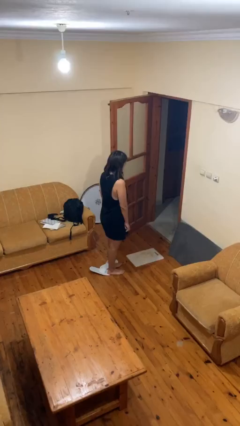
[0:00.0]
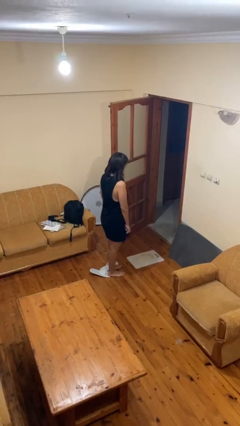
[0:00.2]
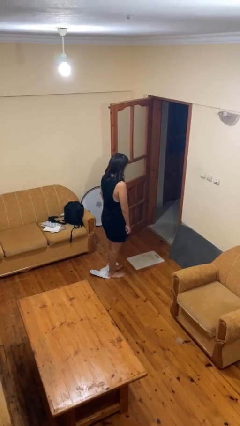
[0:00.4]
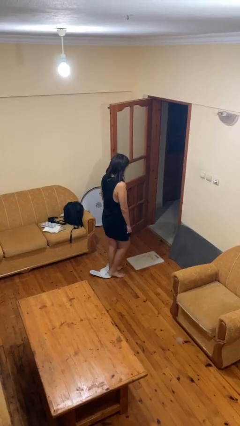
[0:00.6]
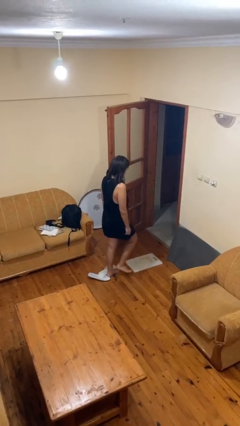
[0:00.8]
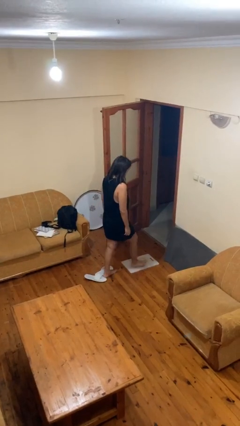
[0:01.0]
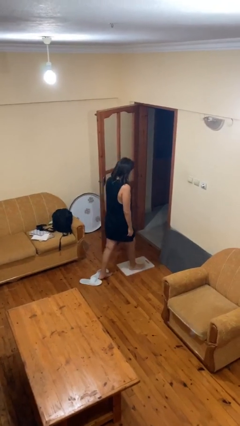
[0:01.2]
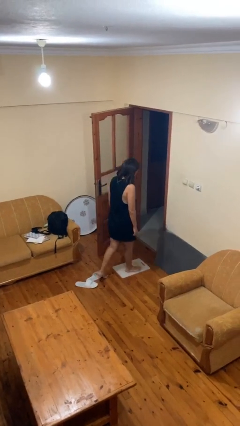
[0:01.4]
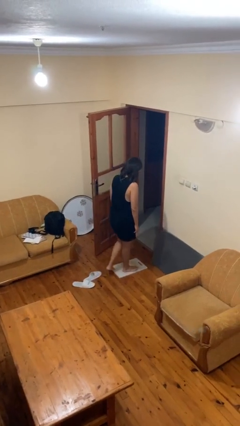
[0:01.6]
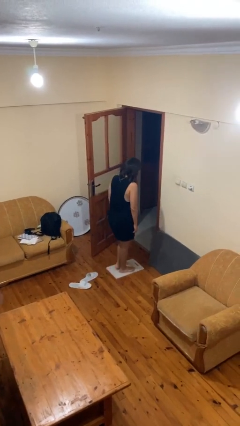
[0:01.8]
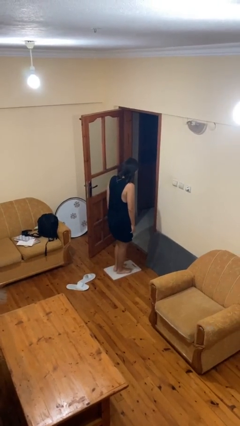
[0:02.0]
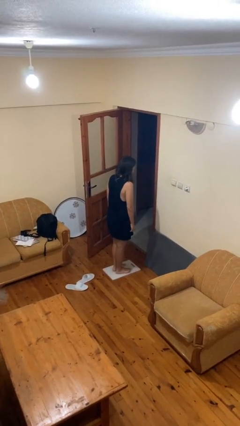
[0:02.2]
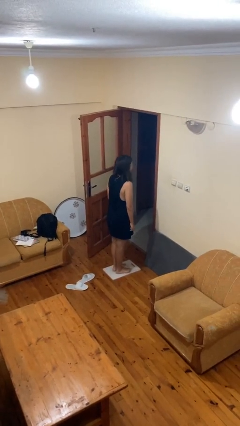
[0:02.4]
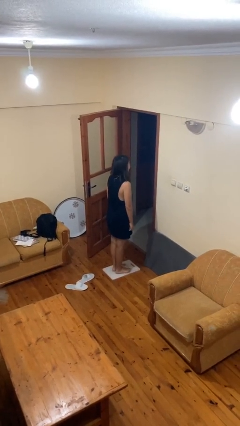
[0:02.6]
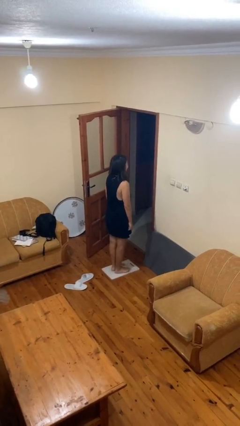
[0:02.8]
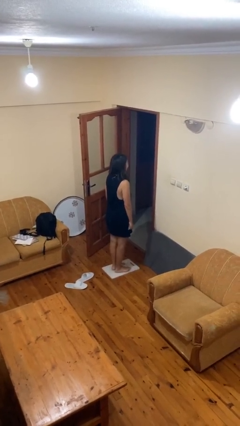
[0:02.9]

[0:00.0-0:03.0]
person uses bodyweight scale

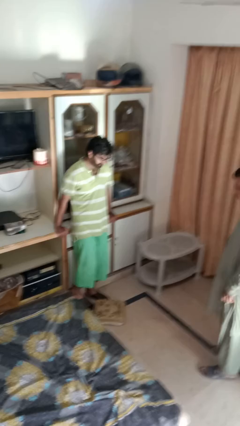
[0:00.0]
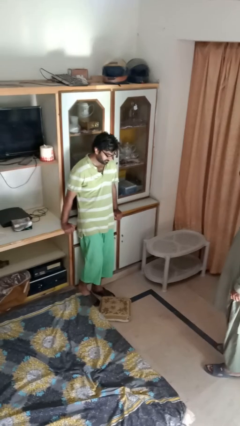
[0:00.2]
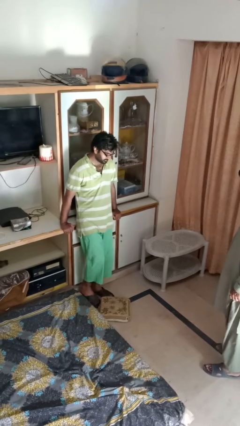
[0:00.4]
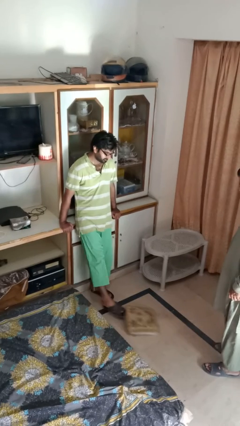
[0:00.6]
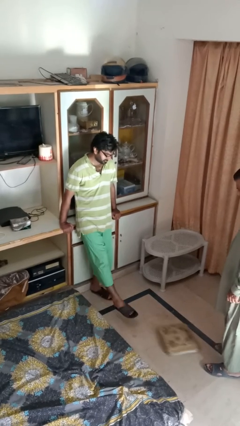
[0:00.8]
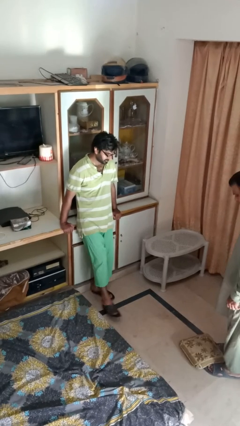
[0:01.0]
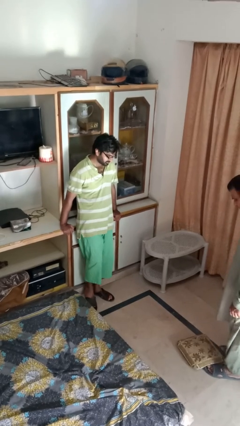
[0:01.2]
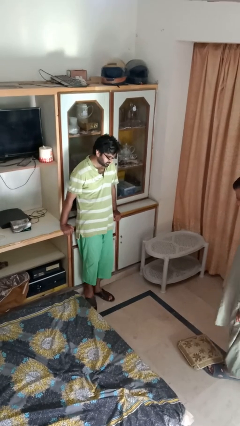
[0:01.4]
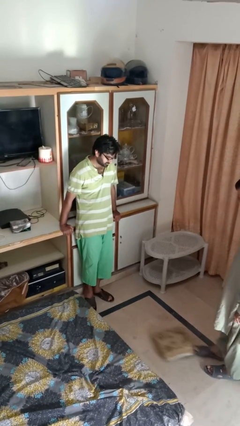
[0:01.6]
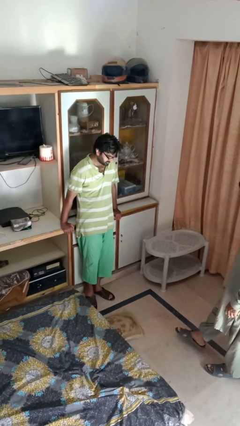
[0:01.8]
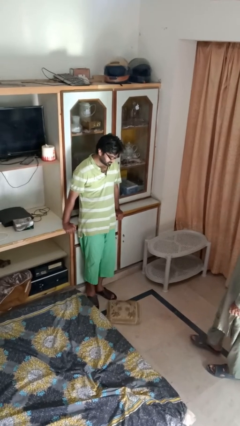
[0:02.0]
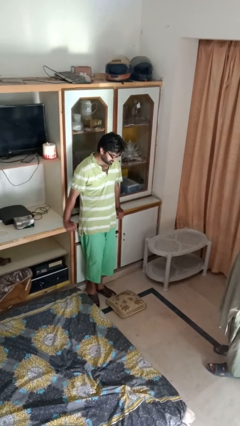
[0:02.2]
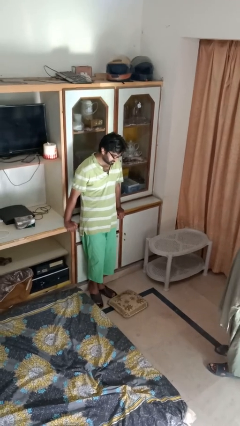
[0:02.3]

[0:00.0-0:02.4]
person kicks object to person

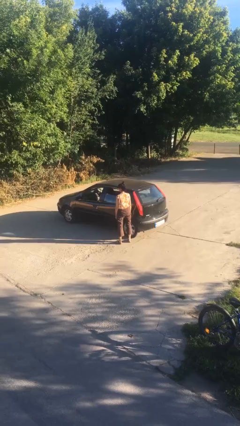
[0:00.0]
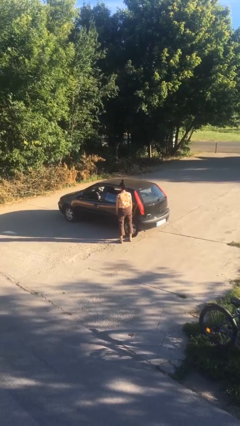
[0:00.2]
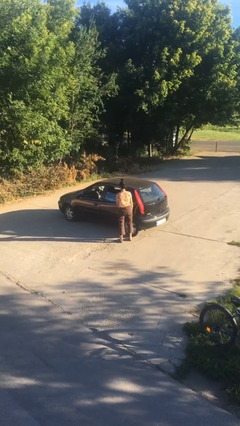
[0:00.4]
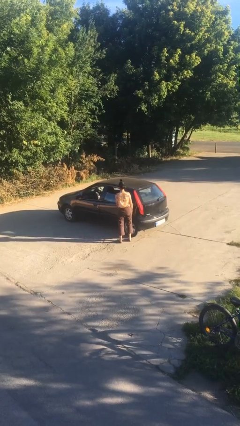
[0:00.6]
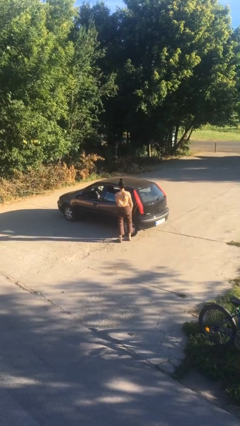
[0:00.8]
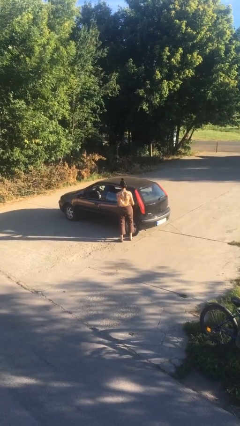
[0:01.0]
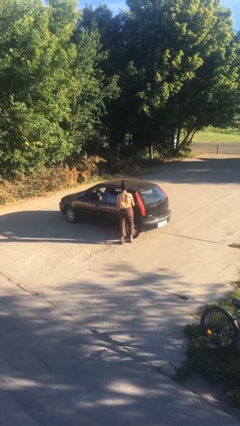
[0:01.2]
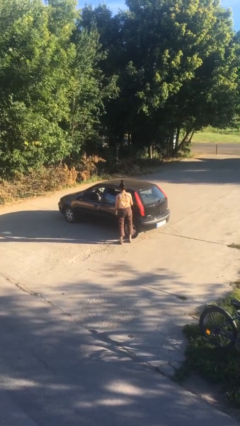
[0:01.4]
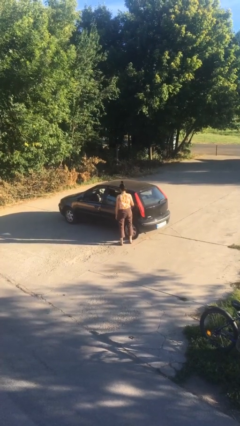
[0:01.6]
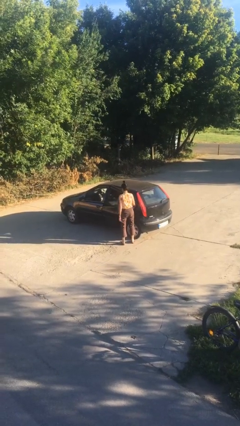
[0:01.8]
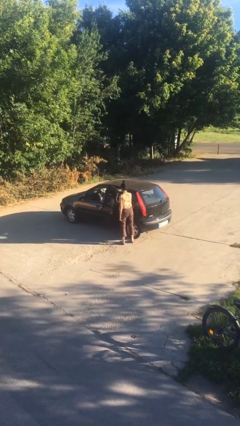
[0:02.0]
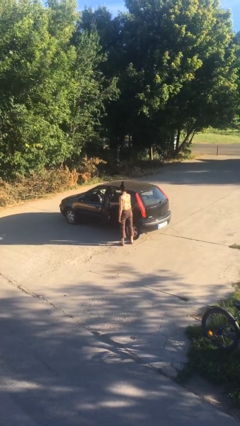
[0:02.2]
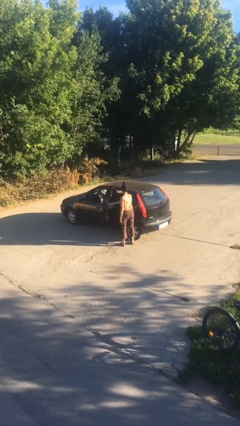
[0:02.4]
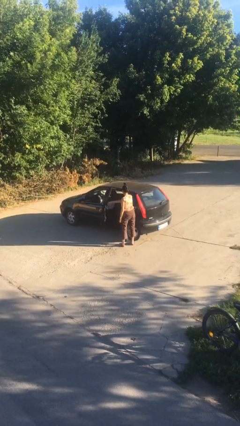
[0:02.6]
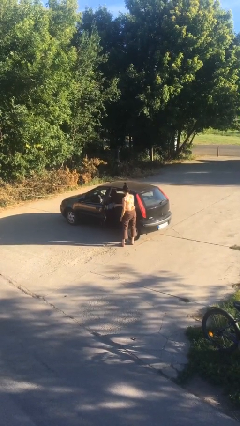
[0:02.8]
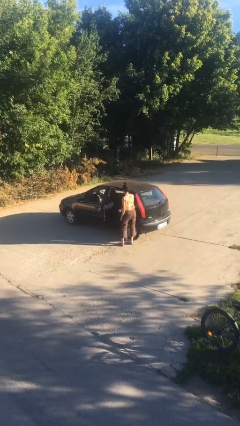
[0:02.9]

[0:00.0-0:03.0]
person opens car door

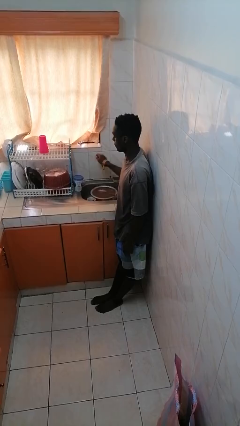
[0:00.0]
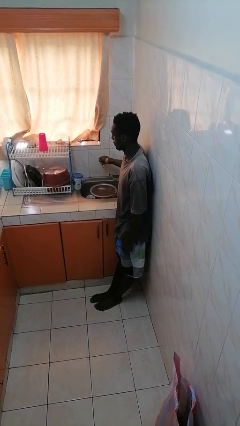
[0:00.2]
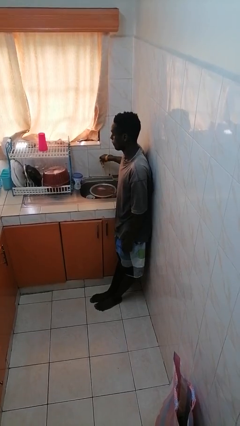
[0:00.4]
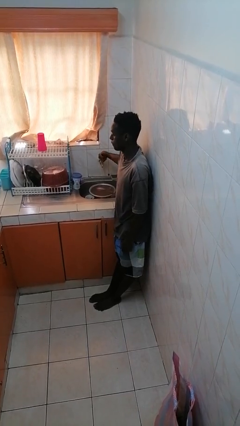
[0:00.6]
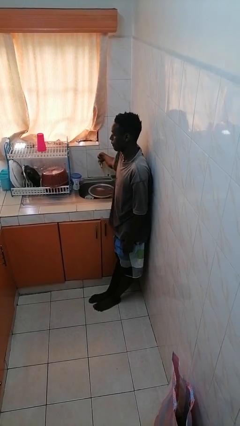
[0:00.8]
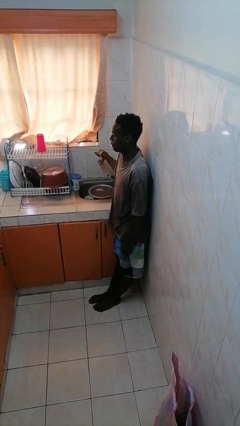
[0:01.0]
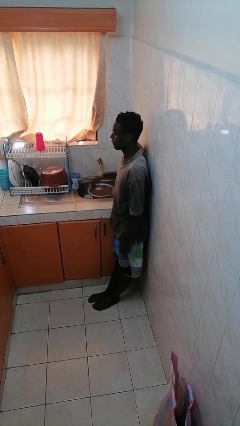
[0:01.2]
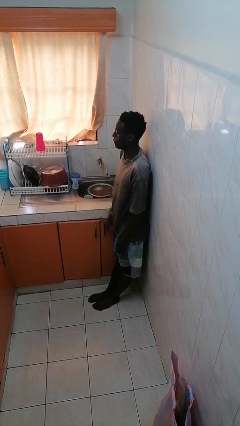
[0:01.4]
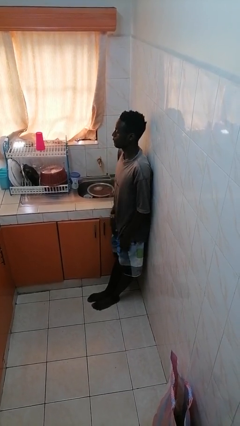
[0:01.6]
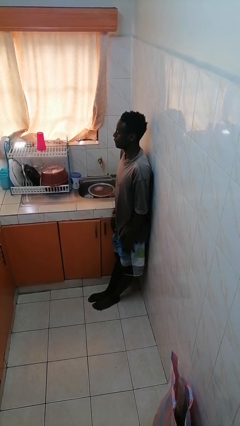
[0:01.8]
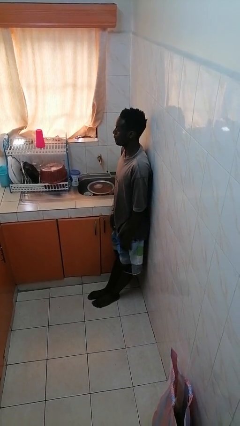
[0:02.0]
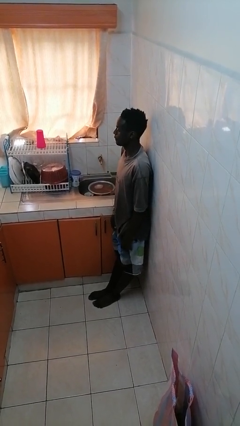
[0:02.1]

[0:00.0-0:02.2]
person turns off faucet

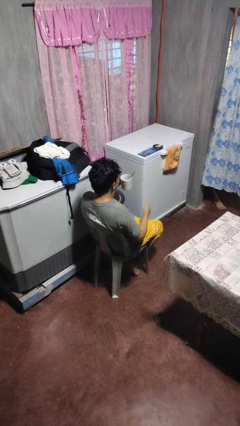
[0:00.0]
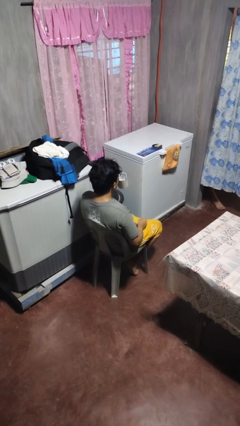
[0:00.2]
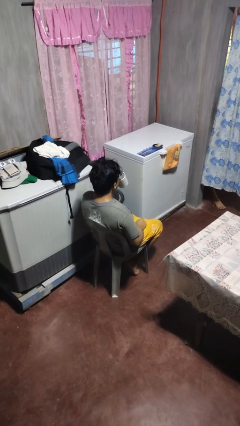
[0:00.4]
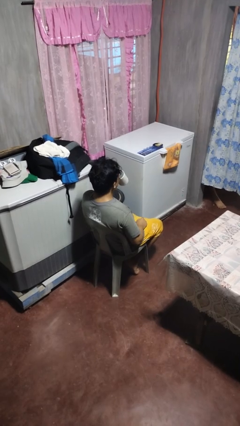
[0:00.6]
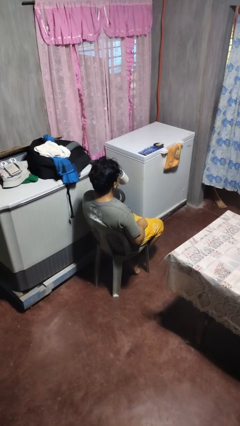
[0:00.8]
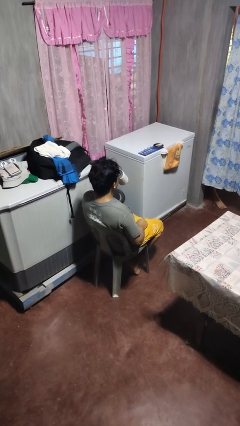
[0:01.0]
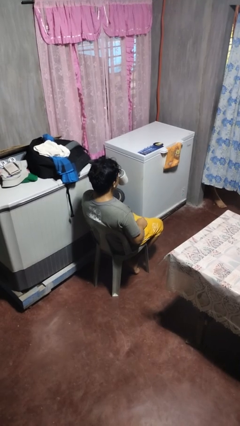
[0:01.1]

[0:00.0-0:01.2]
person drinks from mug

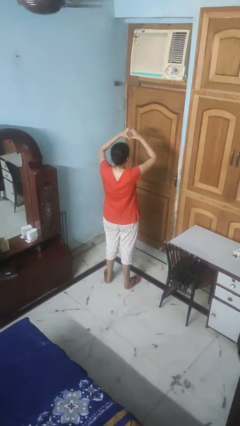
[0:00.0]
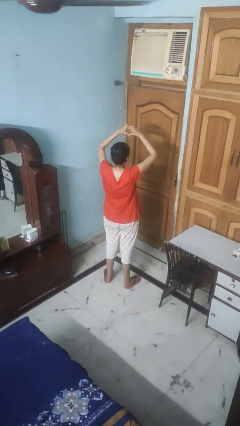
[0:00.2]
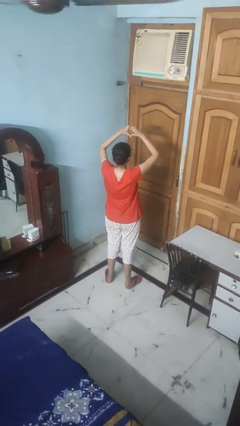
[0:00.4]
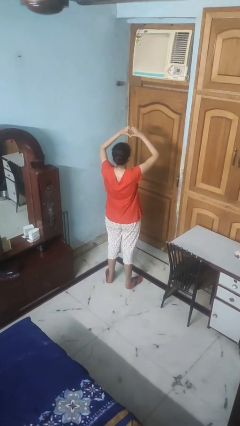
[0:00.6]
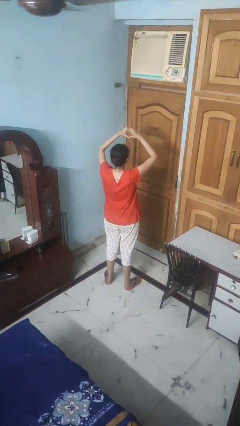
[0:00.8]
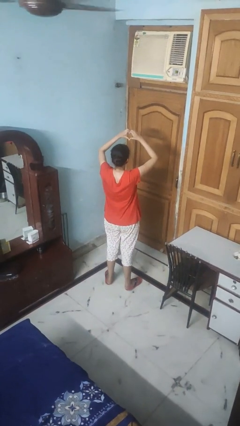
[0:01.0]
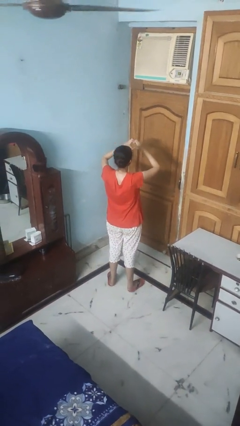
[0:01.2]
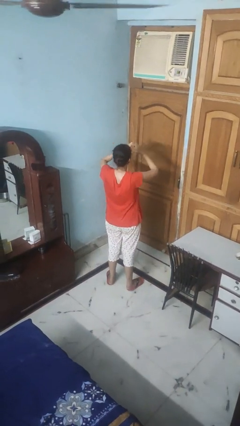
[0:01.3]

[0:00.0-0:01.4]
person gestures heart

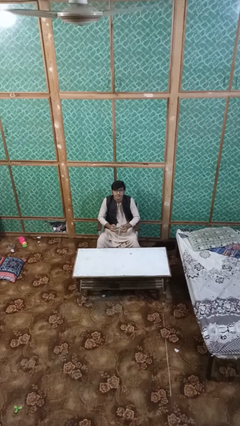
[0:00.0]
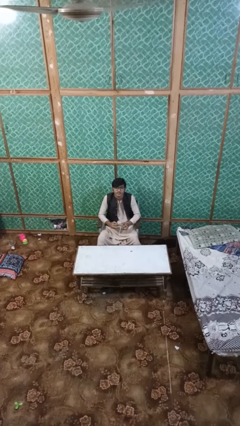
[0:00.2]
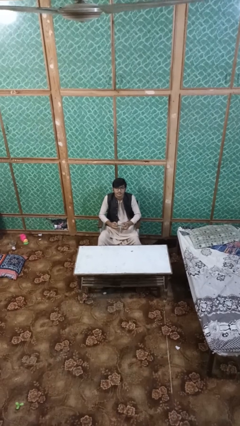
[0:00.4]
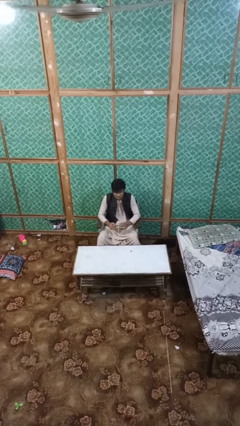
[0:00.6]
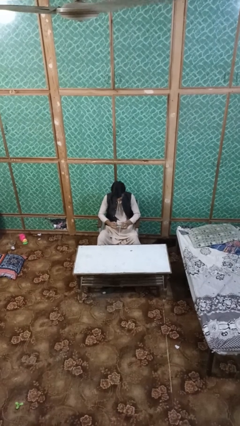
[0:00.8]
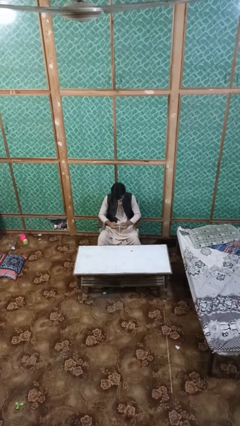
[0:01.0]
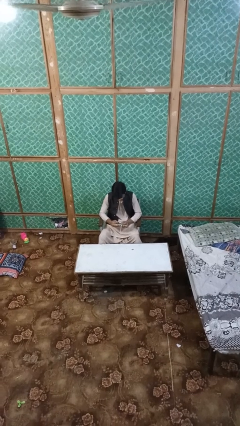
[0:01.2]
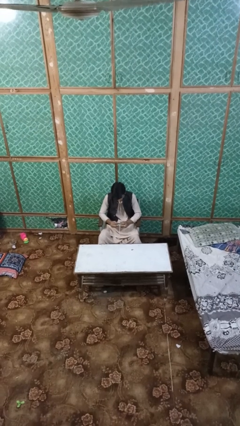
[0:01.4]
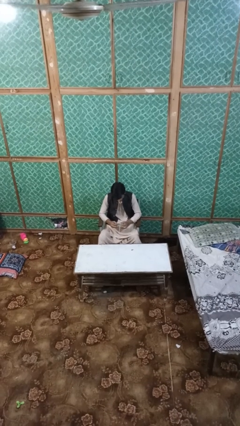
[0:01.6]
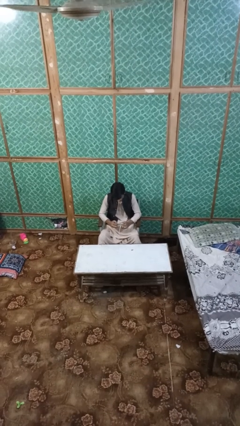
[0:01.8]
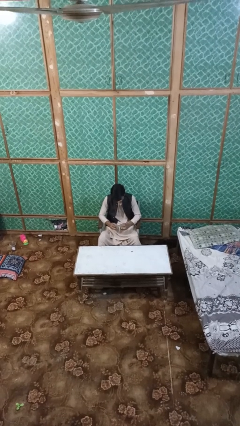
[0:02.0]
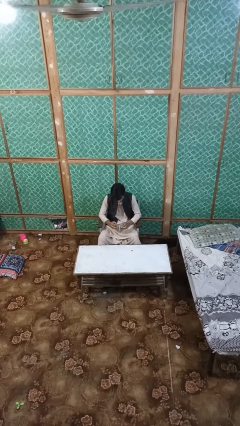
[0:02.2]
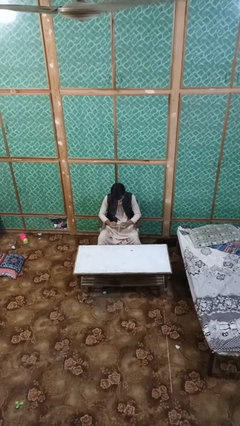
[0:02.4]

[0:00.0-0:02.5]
person interacts with handheld game

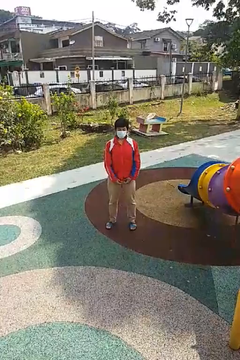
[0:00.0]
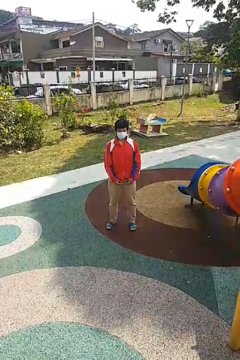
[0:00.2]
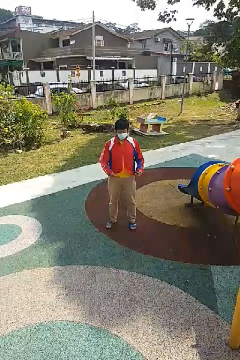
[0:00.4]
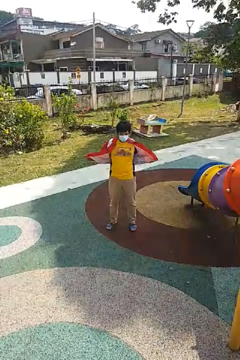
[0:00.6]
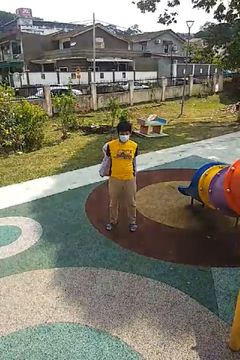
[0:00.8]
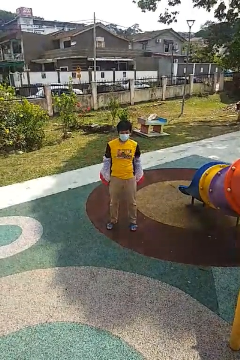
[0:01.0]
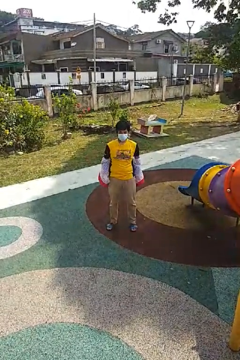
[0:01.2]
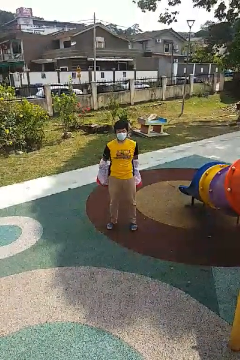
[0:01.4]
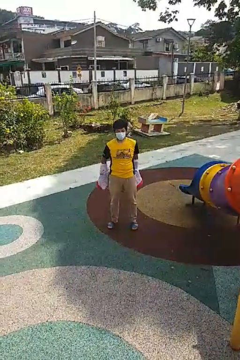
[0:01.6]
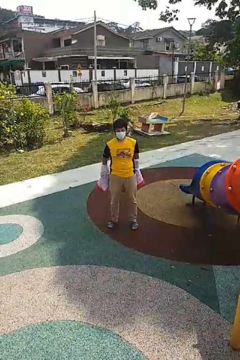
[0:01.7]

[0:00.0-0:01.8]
person takes off jacket
